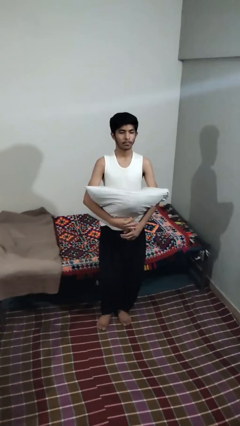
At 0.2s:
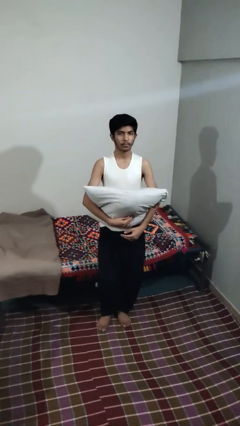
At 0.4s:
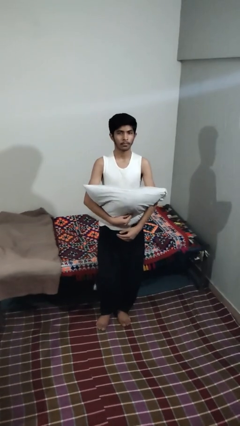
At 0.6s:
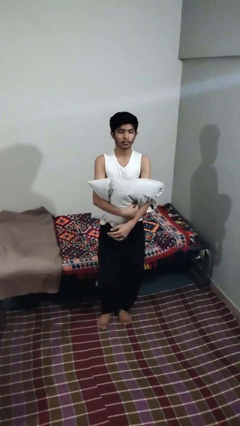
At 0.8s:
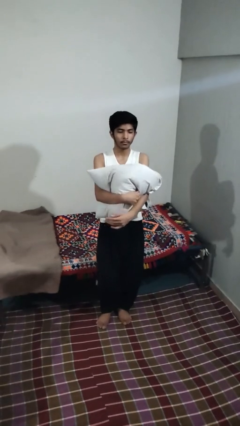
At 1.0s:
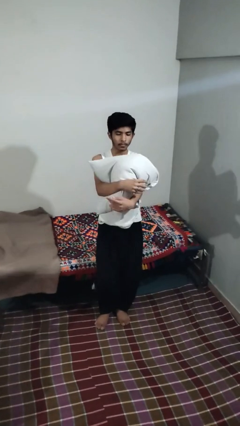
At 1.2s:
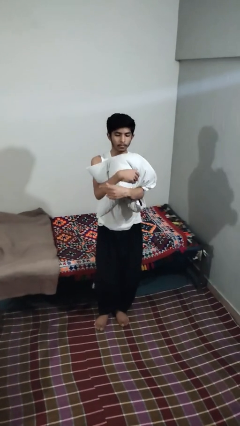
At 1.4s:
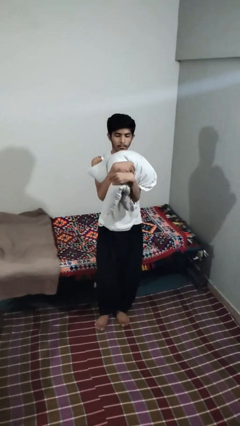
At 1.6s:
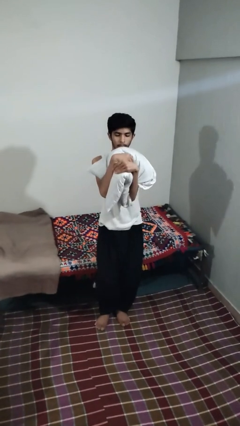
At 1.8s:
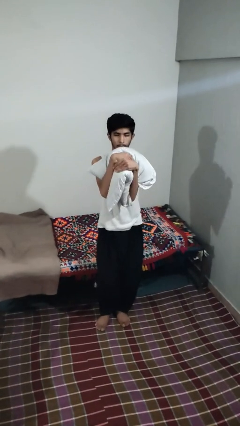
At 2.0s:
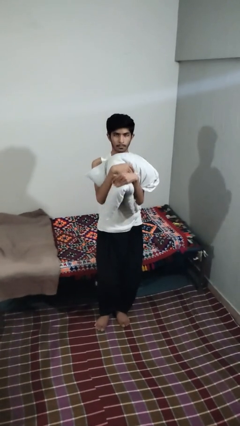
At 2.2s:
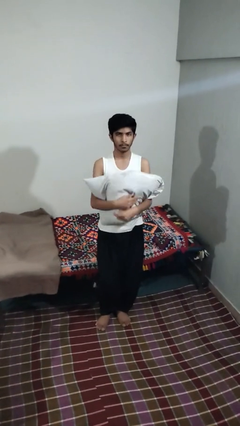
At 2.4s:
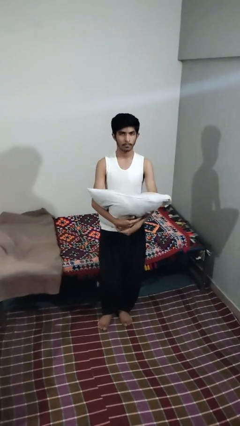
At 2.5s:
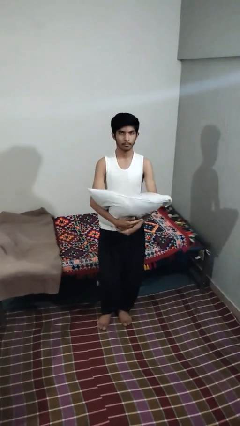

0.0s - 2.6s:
person squeezes object

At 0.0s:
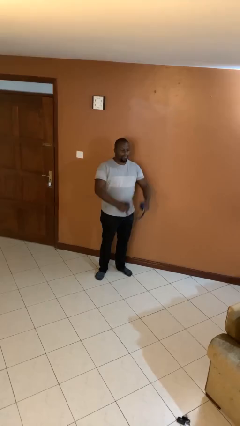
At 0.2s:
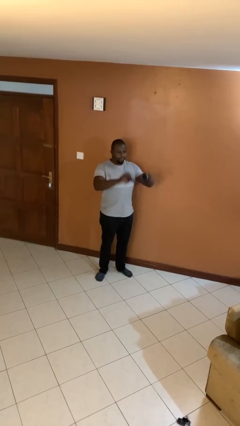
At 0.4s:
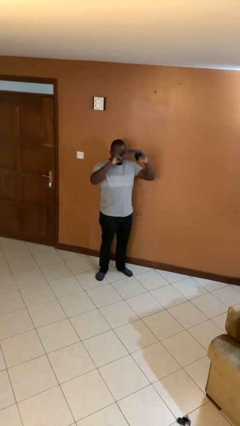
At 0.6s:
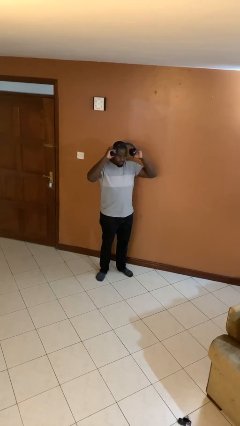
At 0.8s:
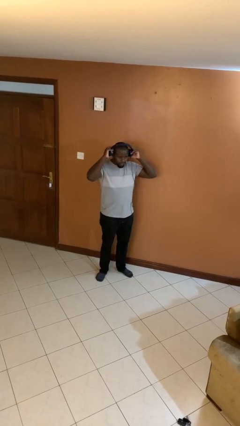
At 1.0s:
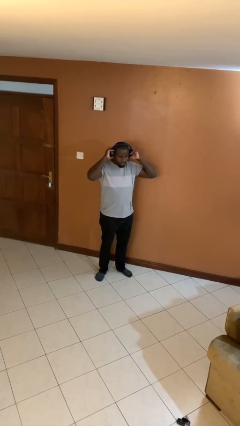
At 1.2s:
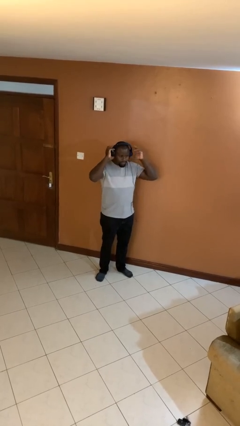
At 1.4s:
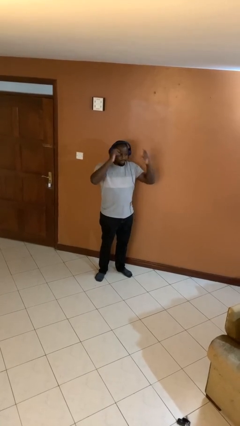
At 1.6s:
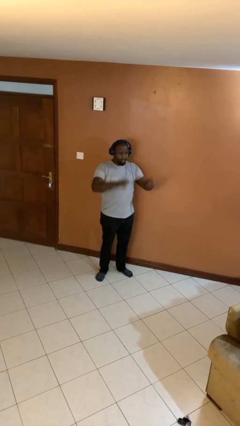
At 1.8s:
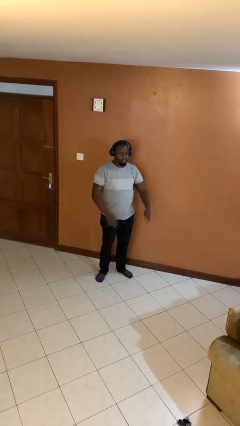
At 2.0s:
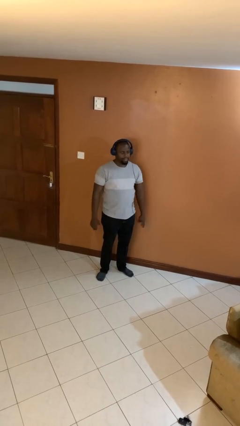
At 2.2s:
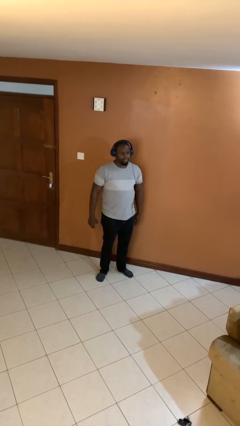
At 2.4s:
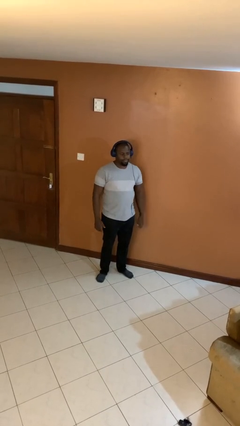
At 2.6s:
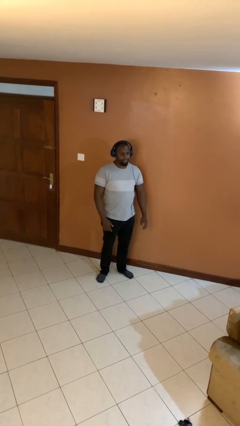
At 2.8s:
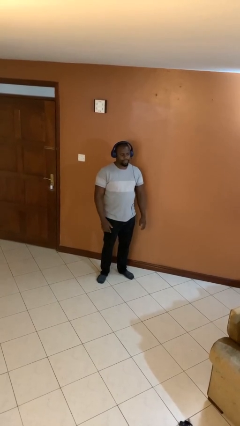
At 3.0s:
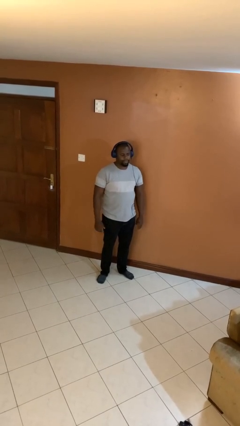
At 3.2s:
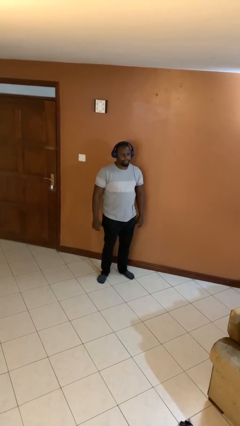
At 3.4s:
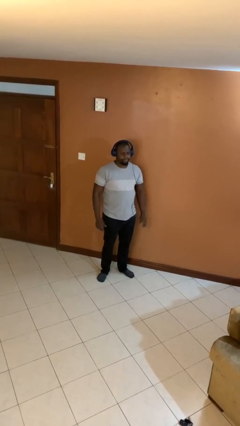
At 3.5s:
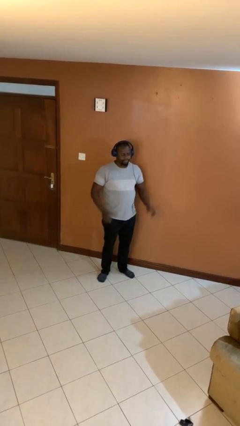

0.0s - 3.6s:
person puts on headphones

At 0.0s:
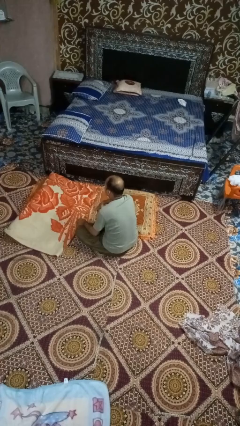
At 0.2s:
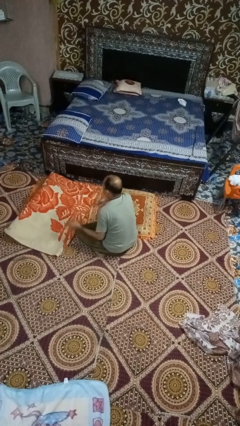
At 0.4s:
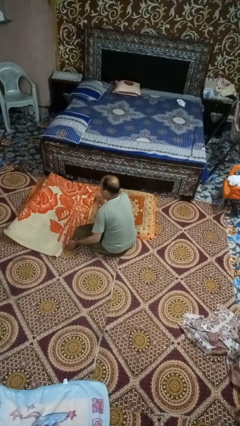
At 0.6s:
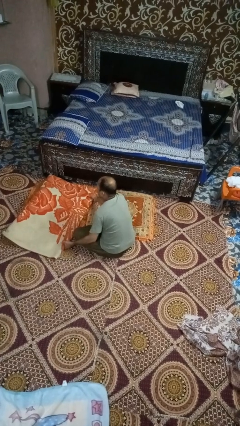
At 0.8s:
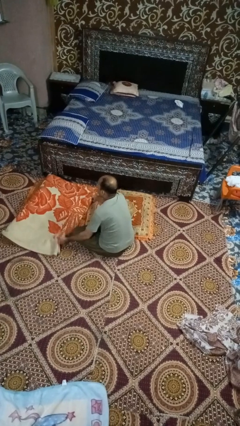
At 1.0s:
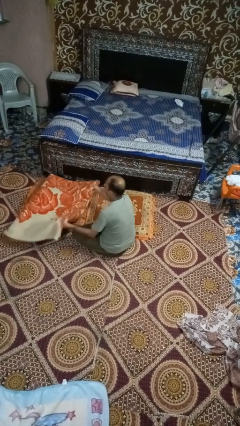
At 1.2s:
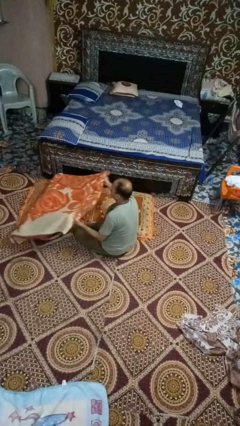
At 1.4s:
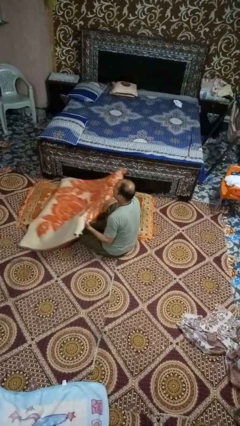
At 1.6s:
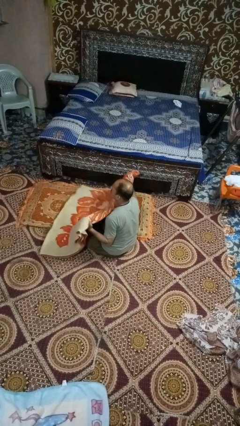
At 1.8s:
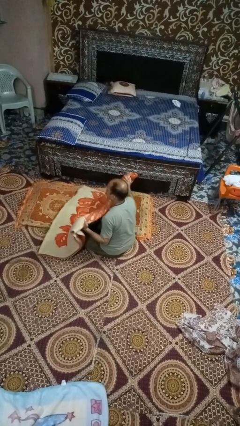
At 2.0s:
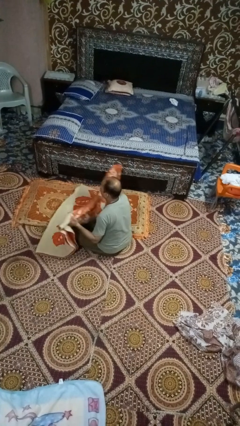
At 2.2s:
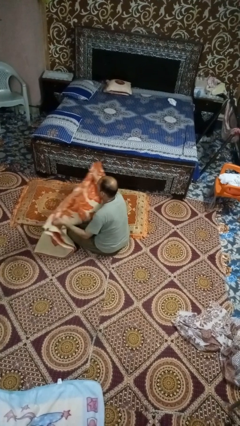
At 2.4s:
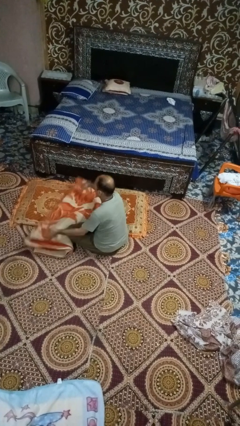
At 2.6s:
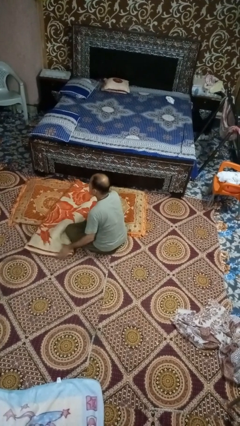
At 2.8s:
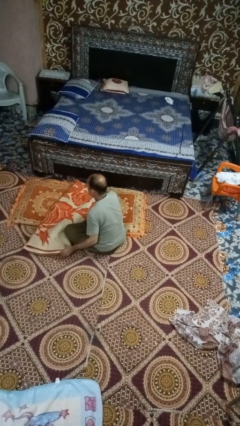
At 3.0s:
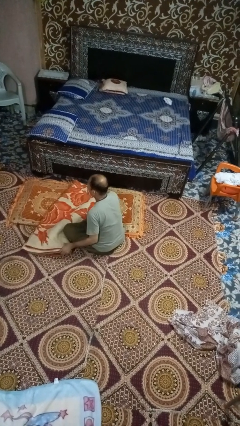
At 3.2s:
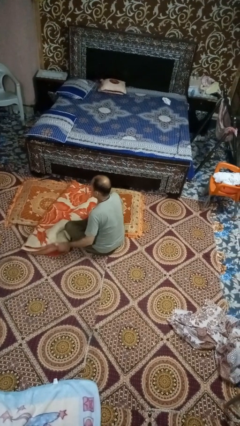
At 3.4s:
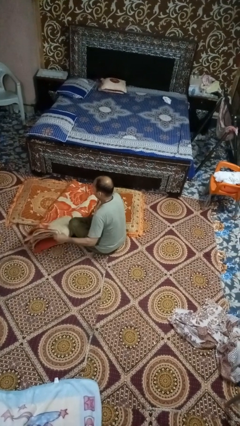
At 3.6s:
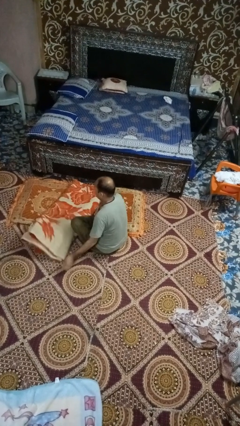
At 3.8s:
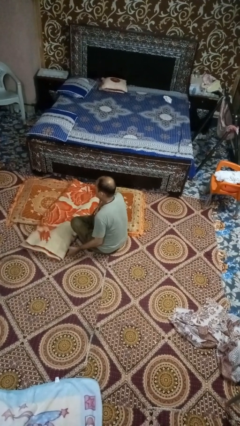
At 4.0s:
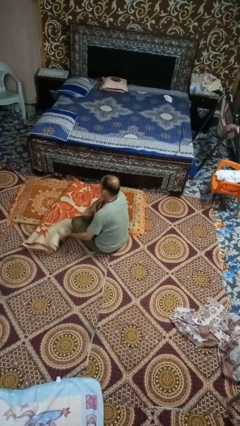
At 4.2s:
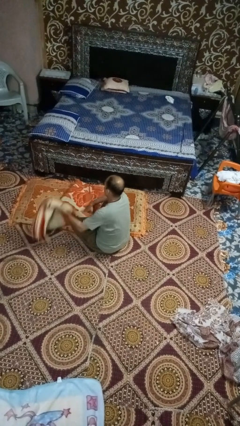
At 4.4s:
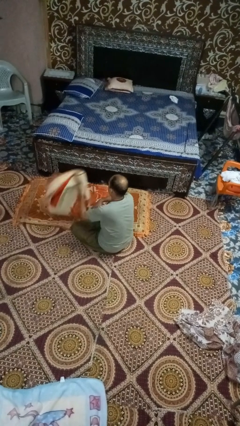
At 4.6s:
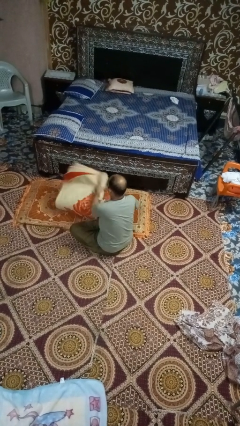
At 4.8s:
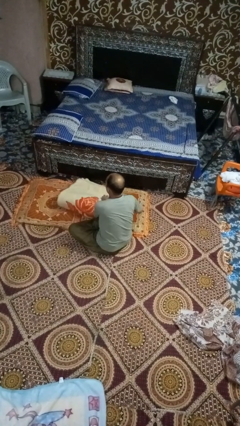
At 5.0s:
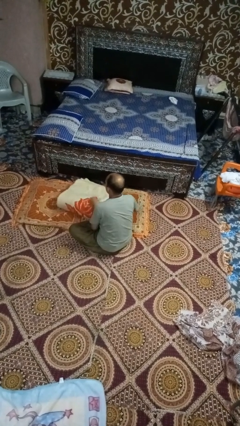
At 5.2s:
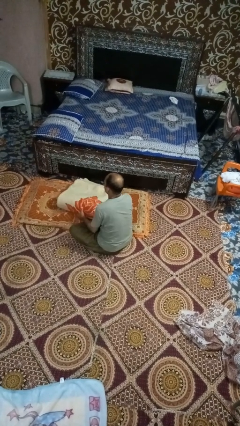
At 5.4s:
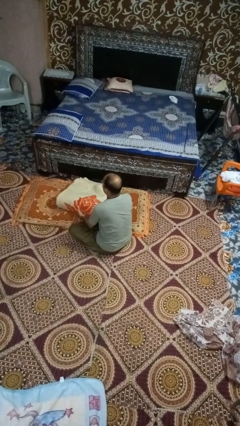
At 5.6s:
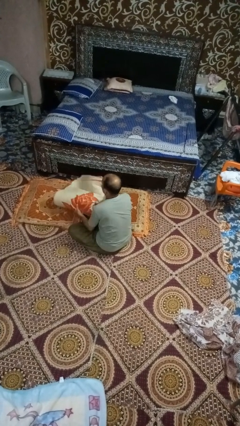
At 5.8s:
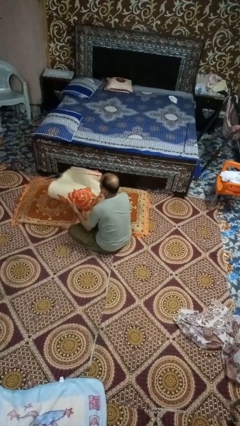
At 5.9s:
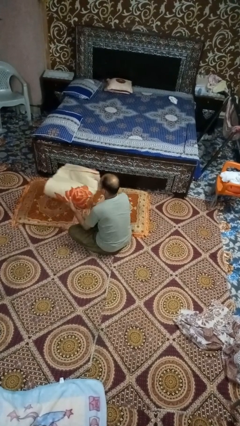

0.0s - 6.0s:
person folds blanket

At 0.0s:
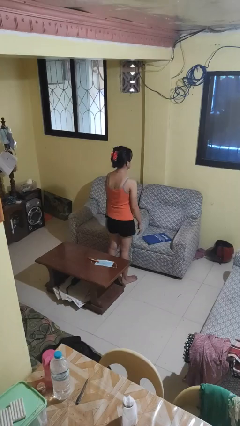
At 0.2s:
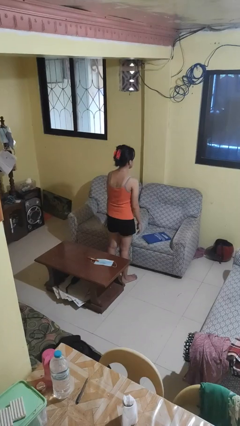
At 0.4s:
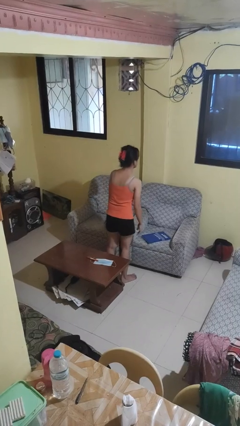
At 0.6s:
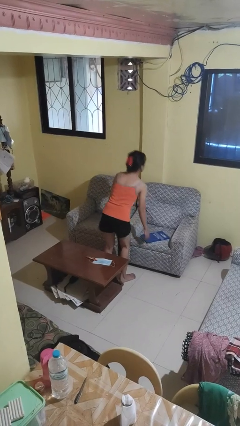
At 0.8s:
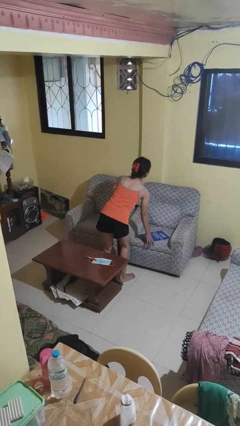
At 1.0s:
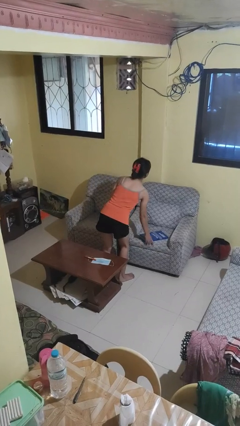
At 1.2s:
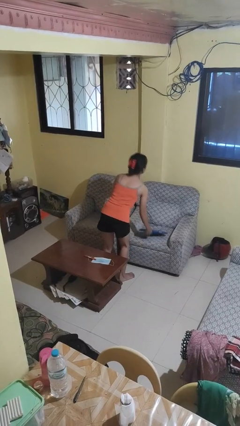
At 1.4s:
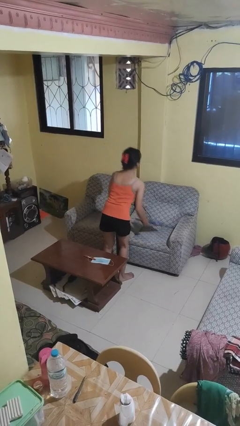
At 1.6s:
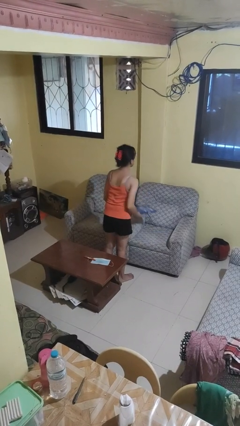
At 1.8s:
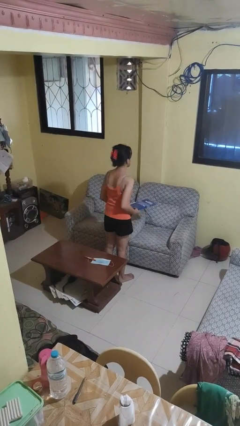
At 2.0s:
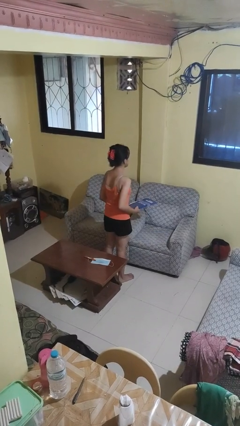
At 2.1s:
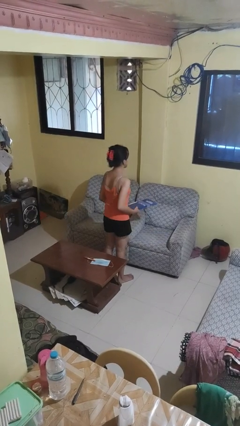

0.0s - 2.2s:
person picks up object from couch

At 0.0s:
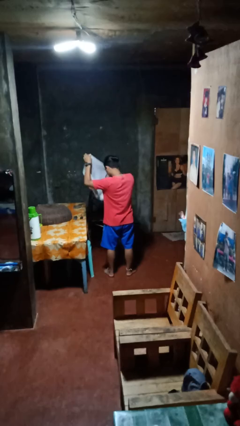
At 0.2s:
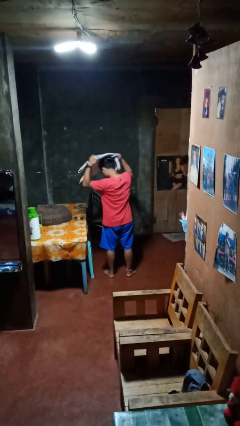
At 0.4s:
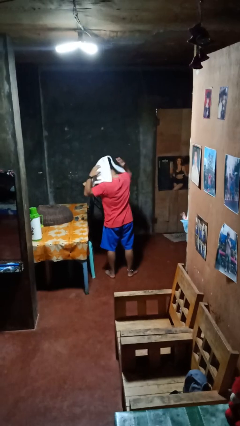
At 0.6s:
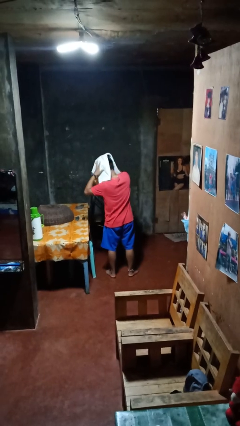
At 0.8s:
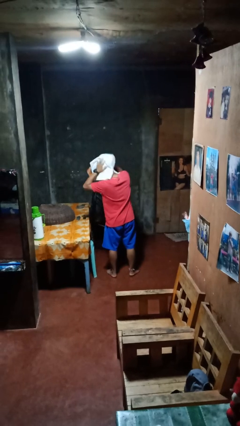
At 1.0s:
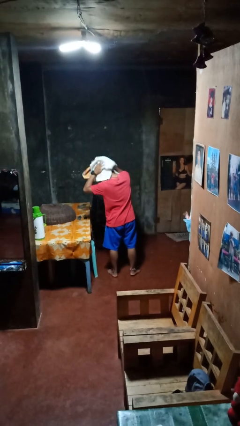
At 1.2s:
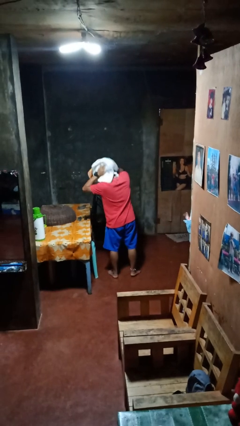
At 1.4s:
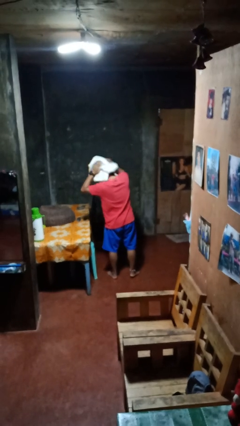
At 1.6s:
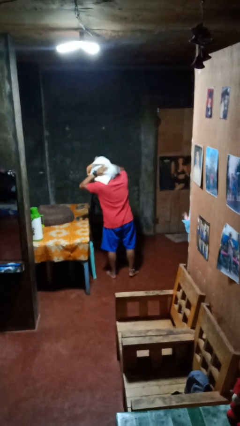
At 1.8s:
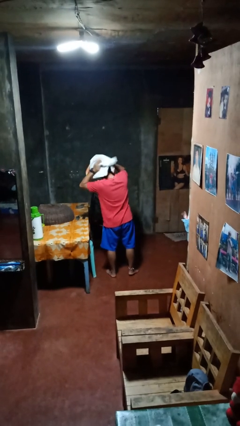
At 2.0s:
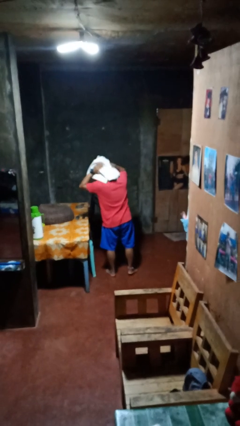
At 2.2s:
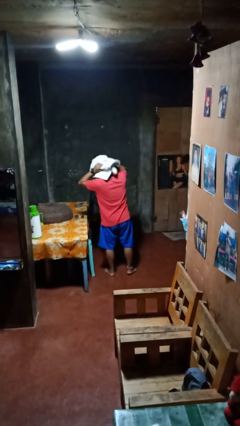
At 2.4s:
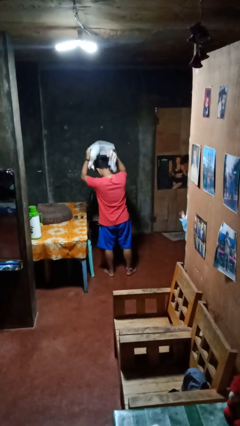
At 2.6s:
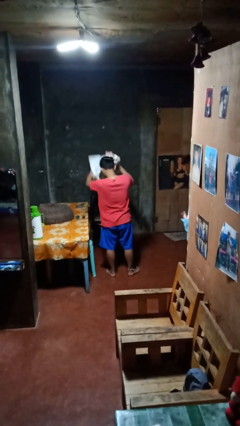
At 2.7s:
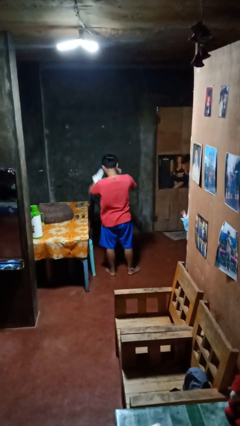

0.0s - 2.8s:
person dries hair with towel

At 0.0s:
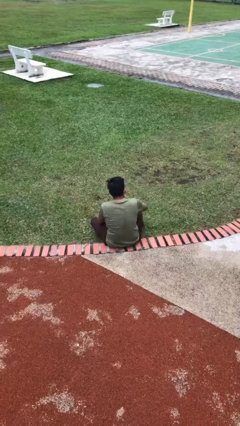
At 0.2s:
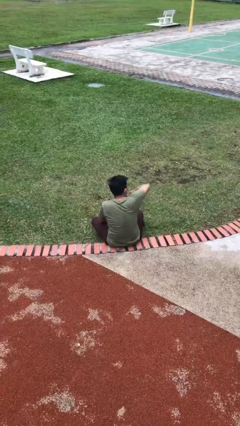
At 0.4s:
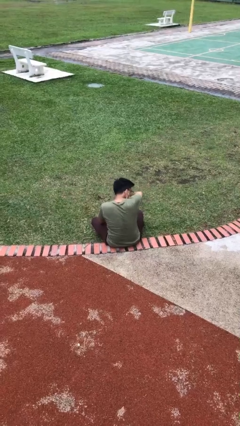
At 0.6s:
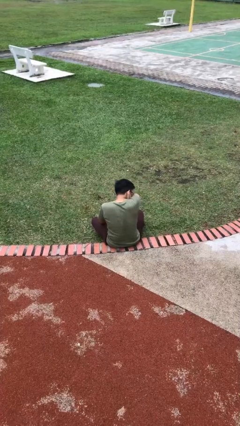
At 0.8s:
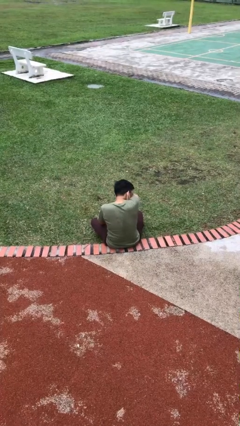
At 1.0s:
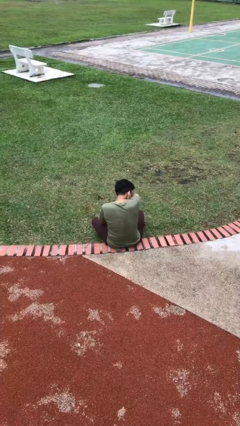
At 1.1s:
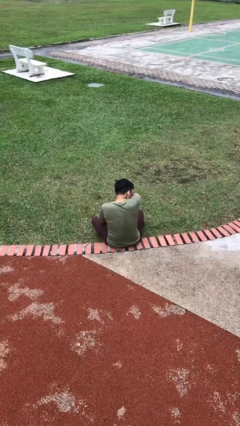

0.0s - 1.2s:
person sneezes into arm
